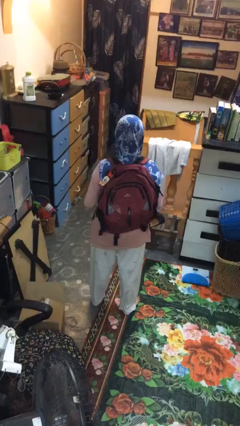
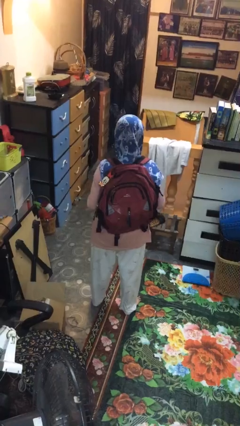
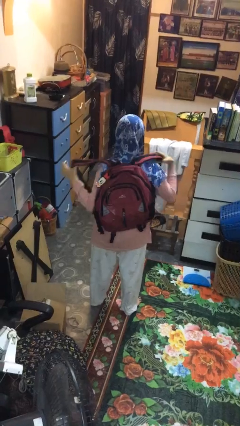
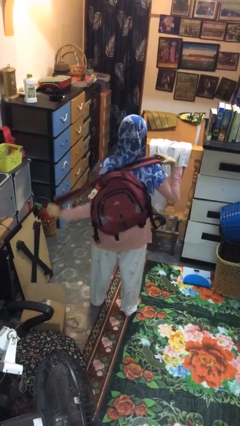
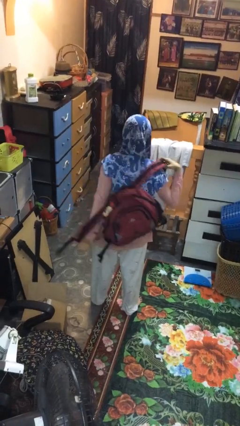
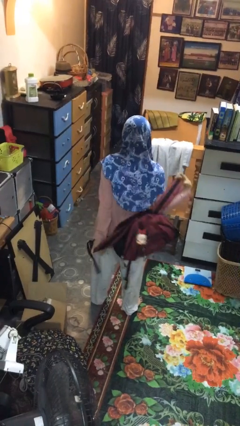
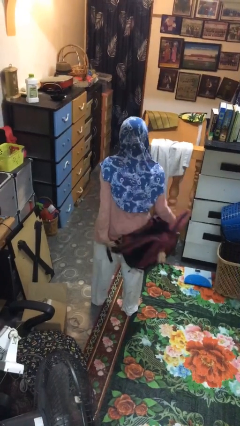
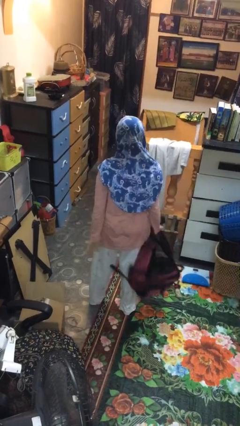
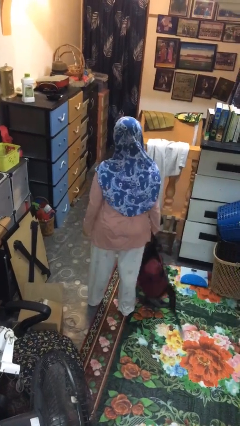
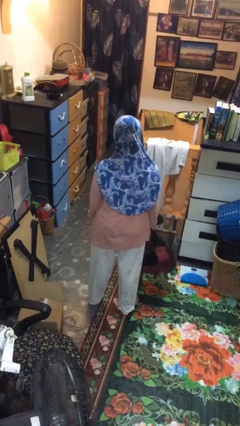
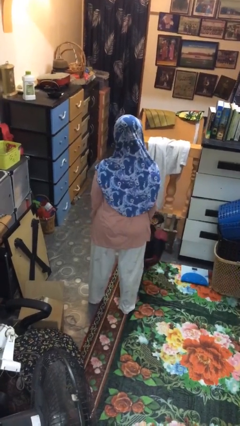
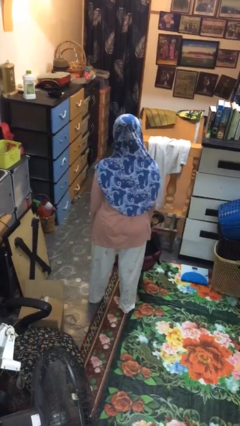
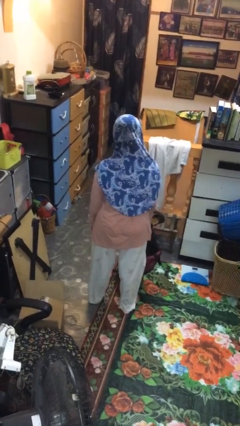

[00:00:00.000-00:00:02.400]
person takes off backpack

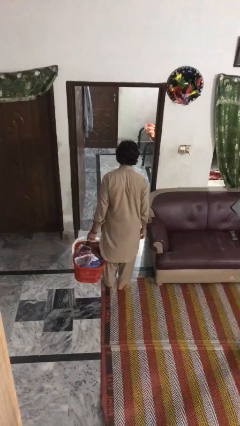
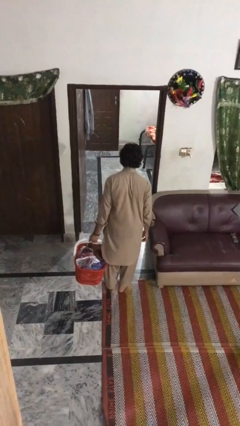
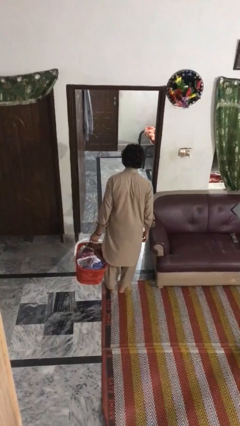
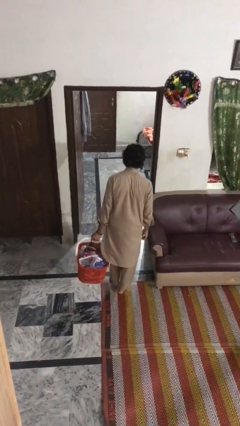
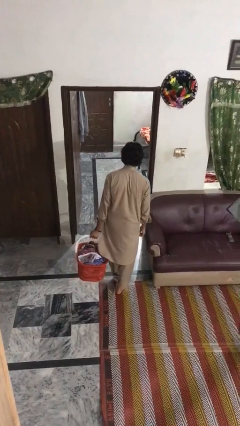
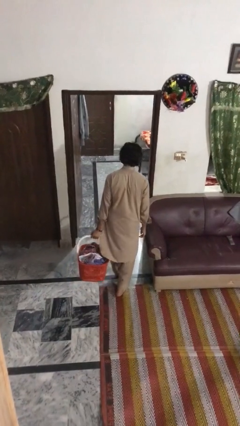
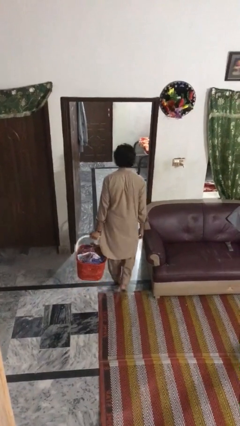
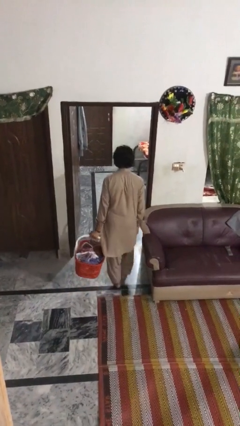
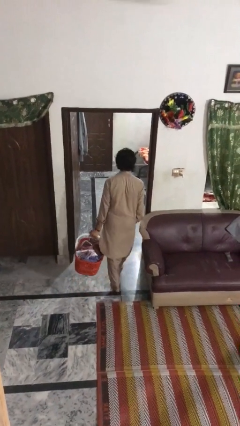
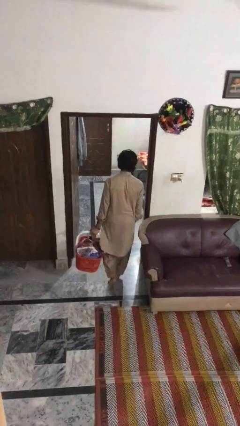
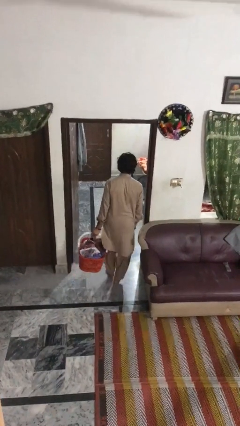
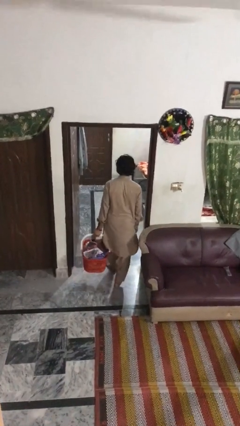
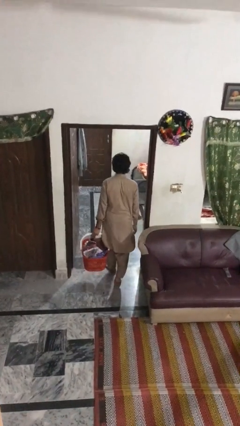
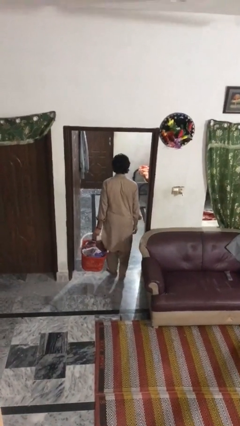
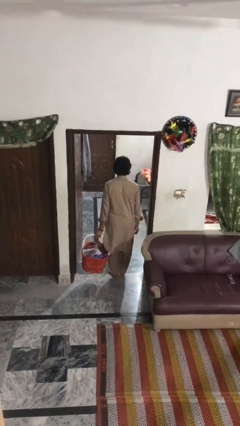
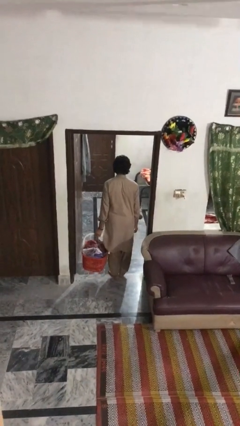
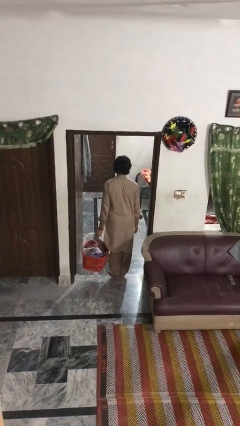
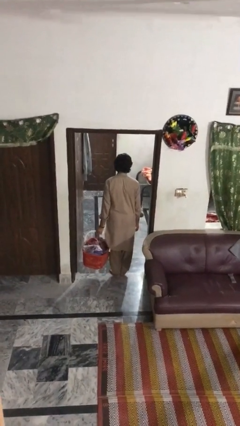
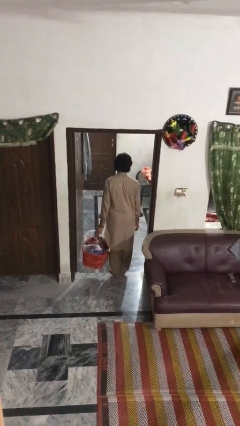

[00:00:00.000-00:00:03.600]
person carries laundry basket

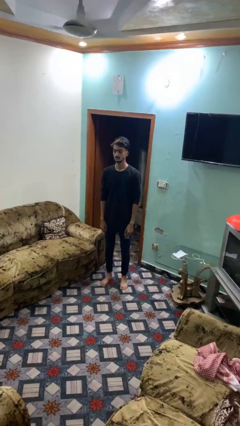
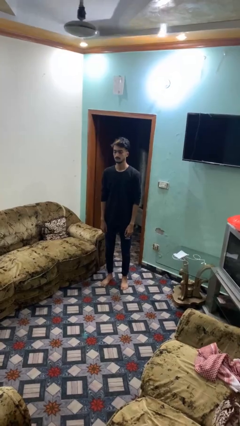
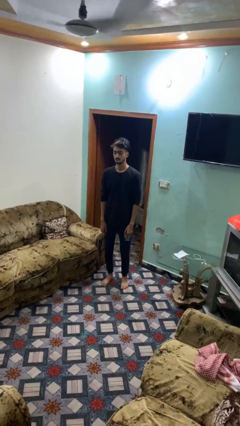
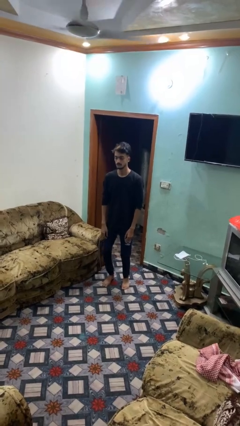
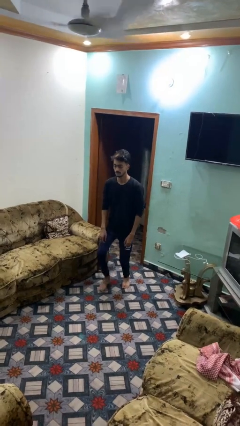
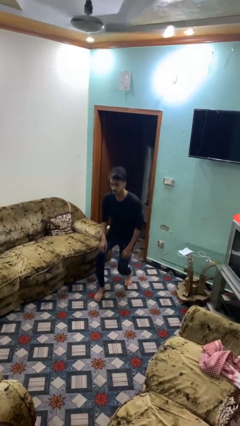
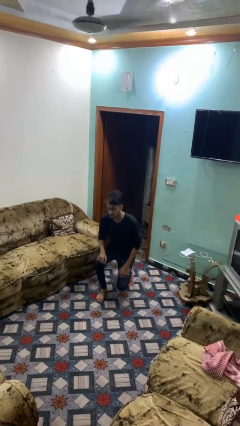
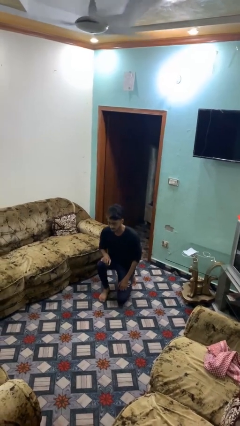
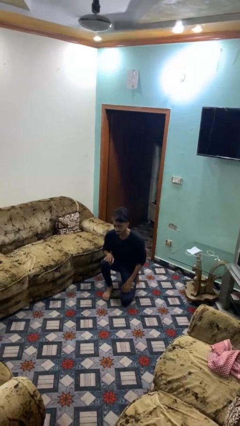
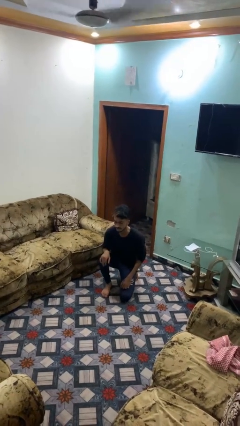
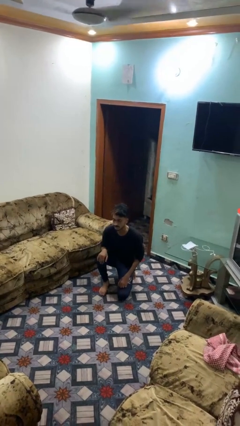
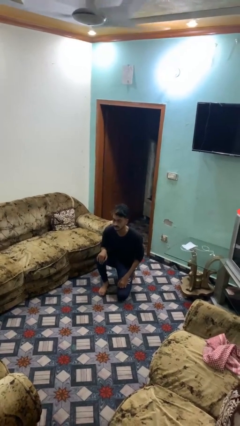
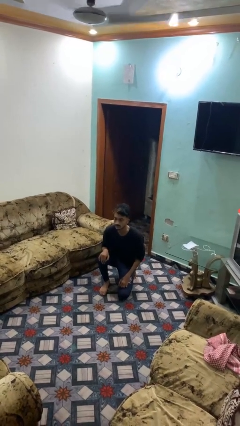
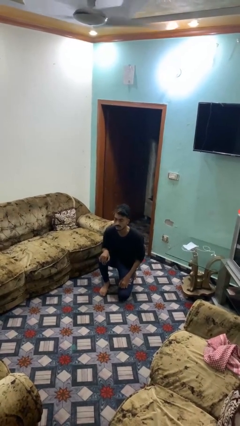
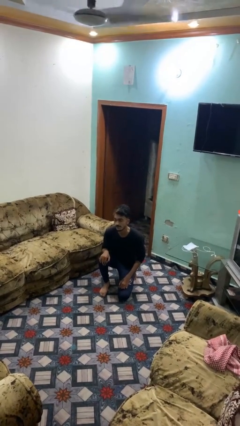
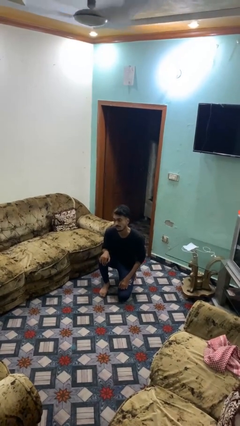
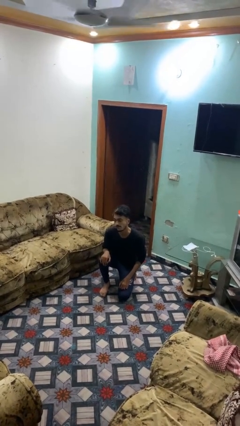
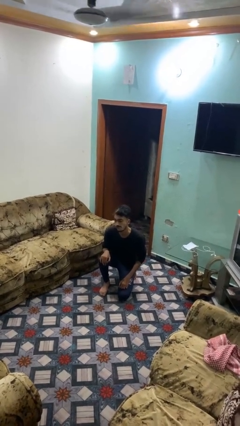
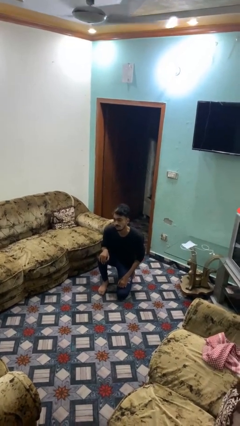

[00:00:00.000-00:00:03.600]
person kneels

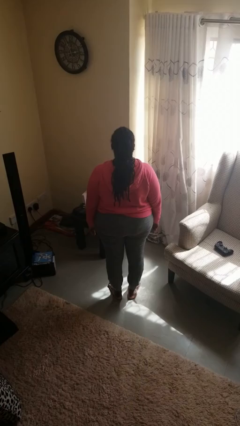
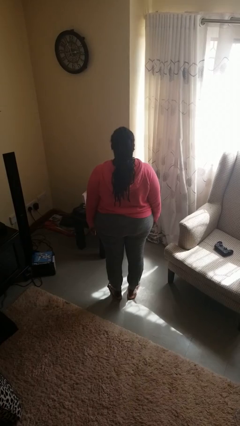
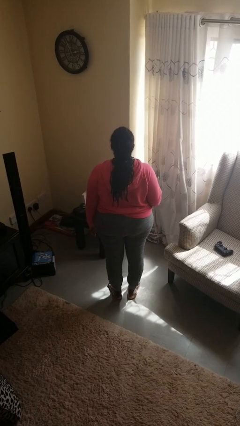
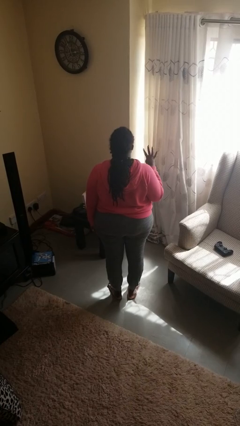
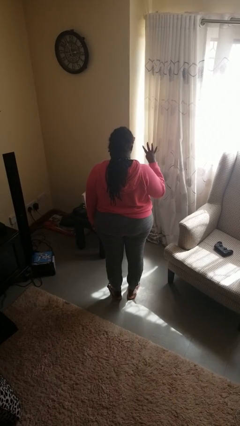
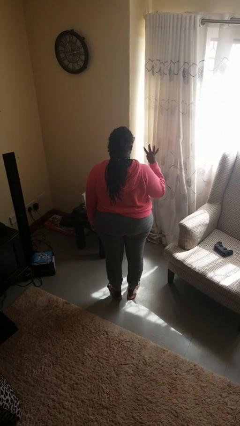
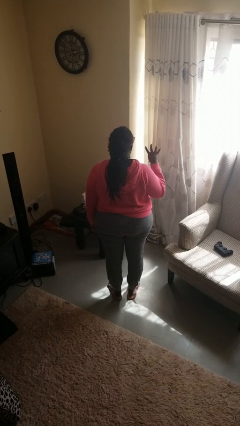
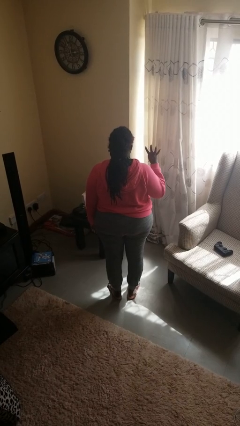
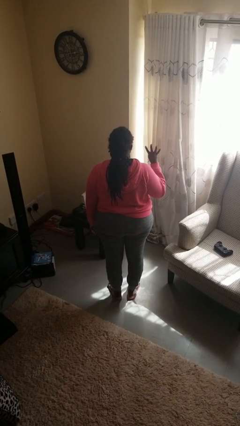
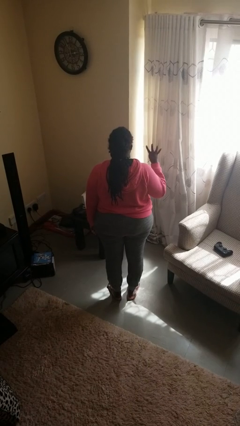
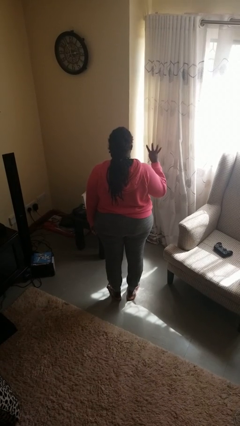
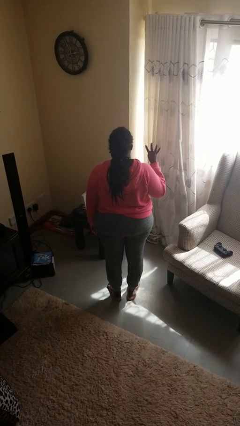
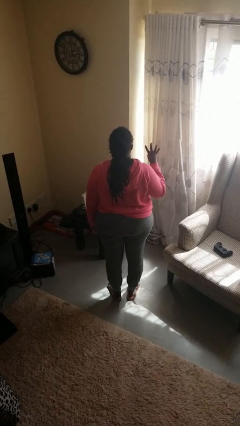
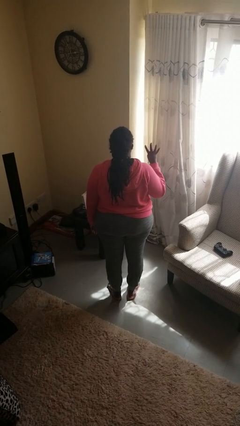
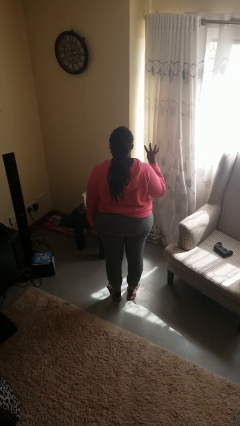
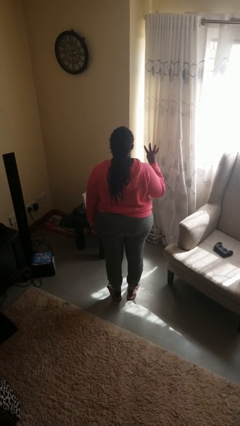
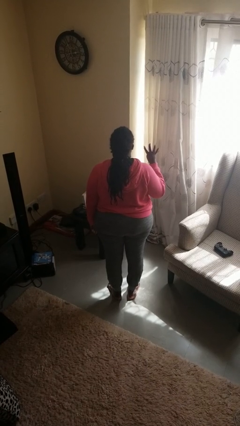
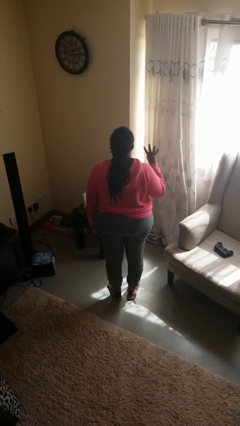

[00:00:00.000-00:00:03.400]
person gestures number four

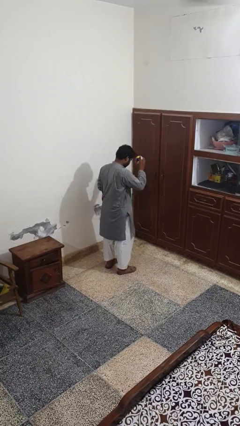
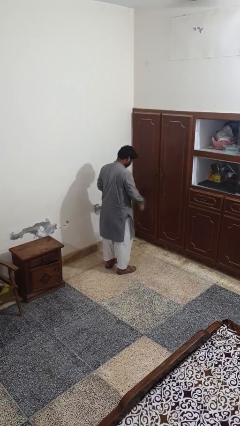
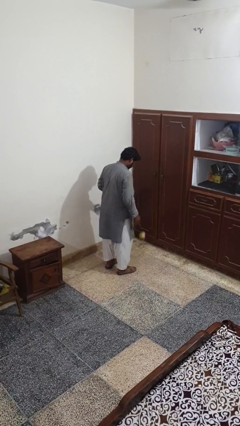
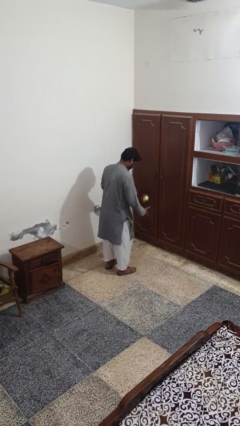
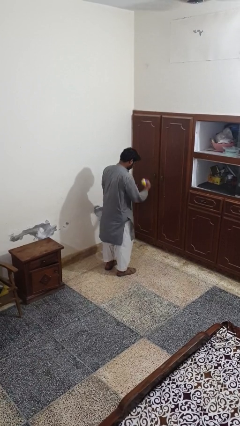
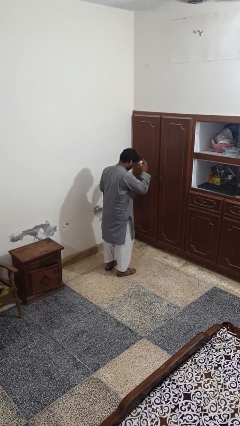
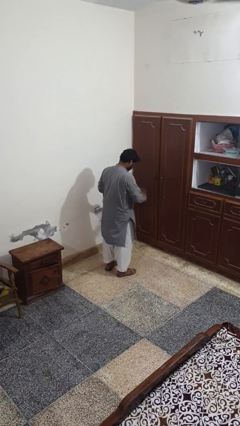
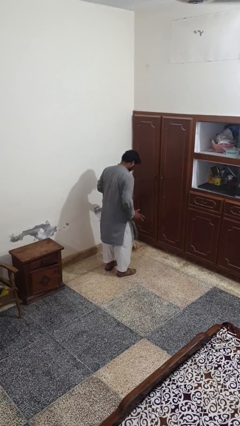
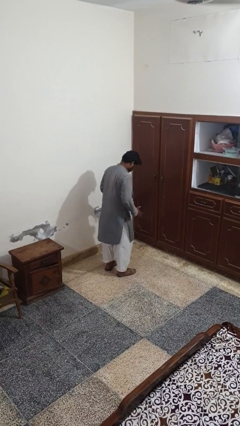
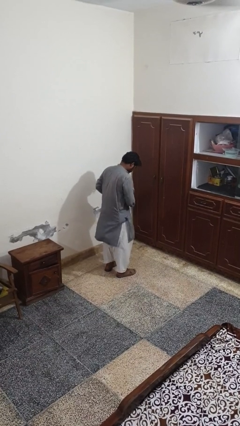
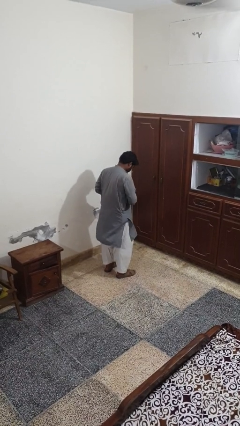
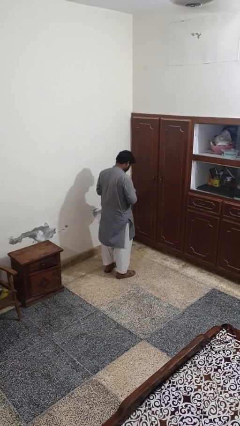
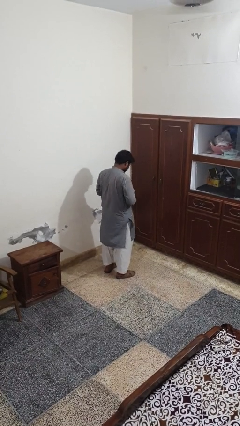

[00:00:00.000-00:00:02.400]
person bounces ball on floor

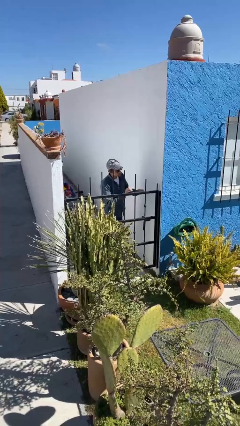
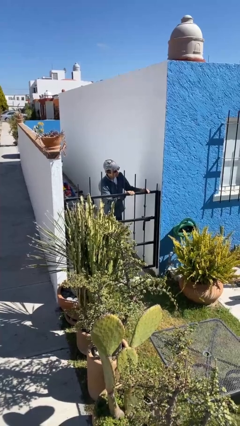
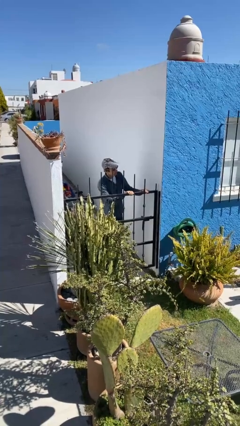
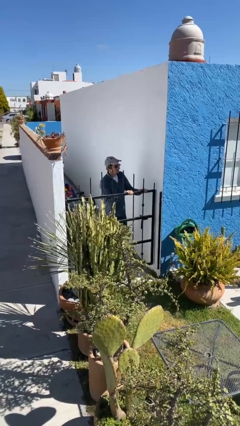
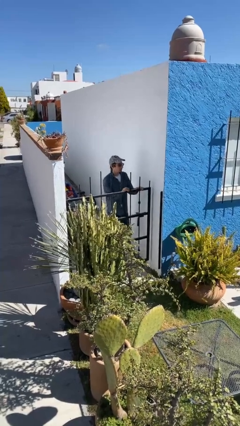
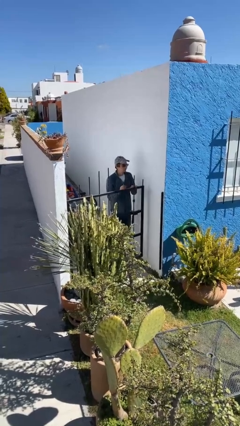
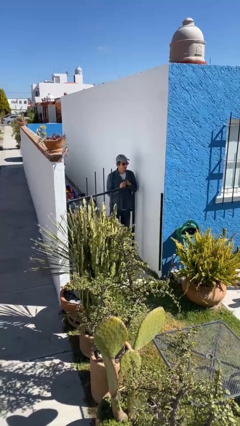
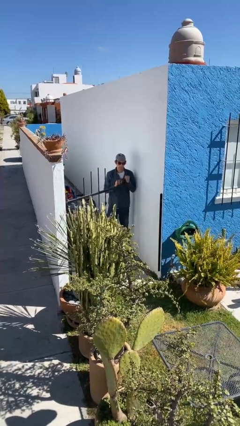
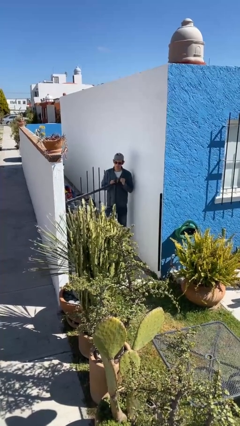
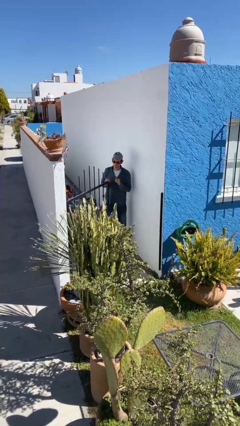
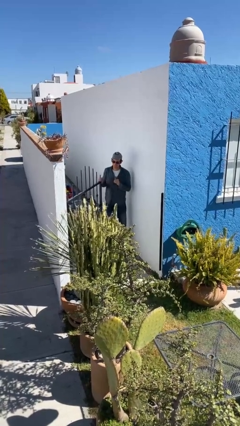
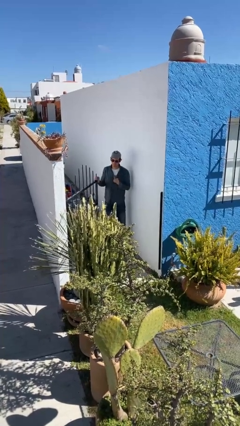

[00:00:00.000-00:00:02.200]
person opens facility door
